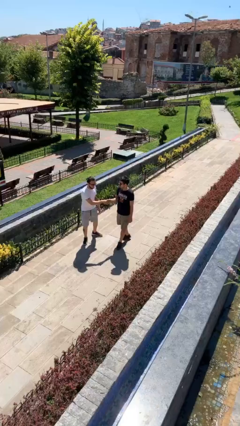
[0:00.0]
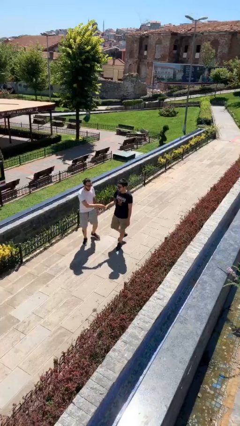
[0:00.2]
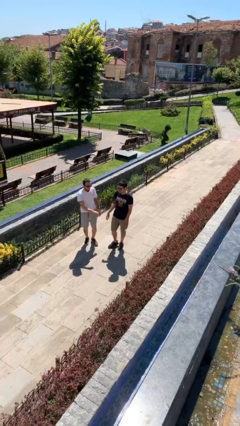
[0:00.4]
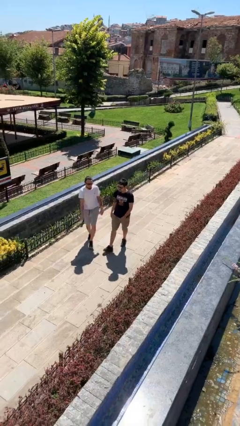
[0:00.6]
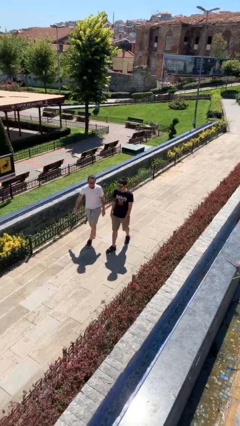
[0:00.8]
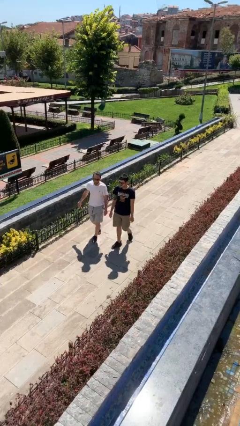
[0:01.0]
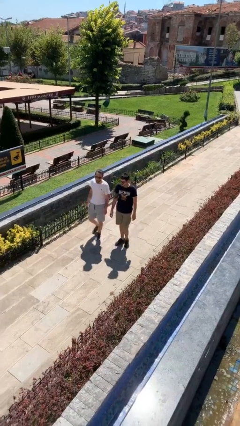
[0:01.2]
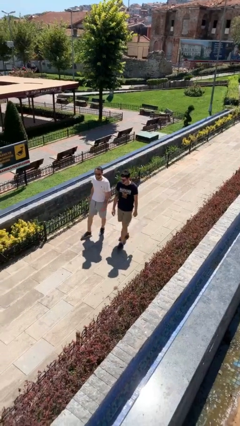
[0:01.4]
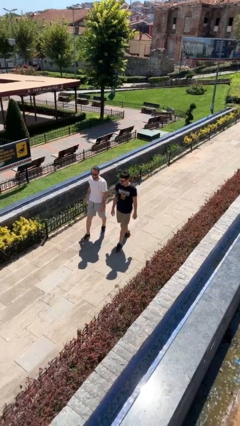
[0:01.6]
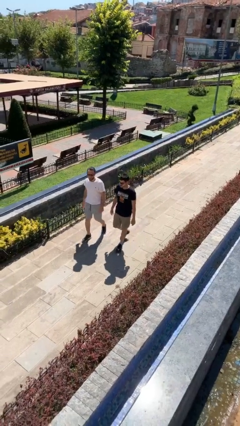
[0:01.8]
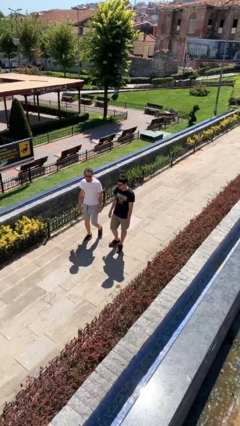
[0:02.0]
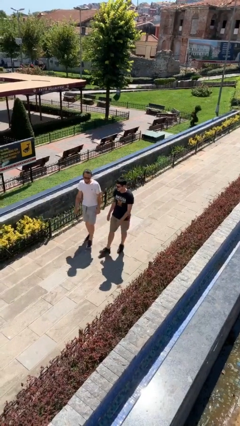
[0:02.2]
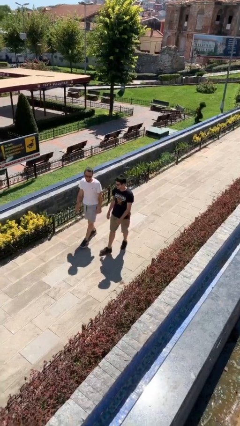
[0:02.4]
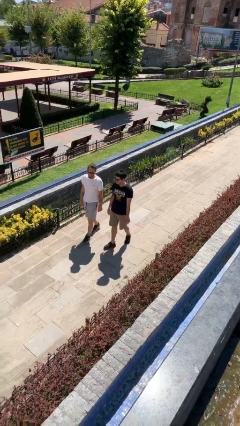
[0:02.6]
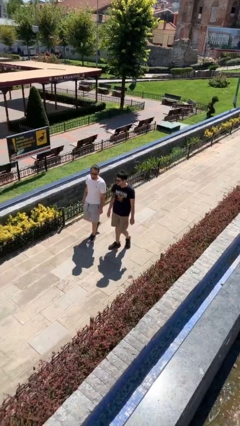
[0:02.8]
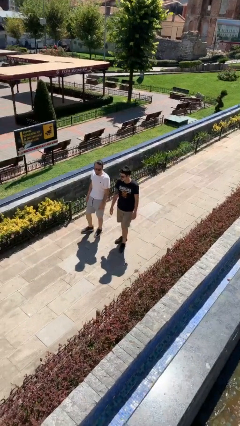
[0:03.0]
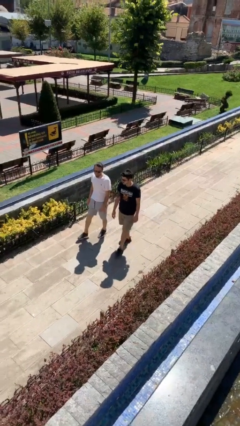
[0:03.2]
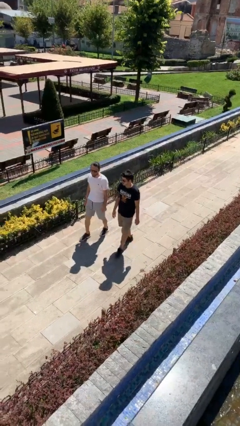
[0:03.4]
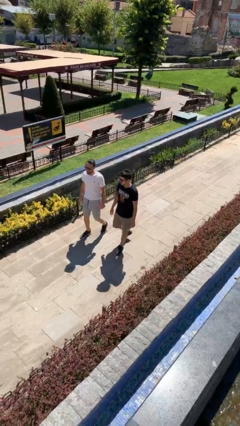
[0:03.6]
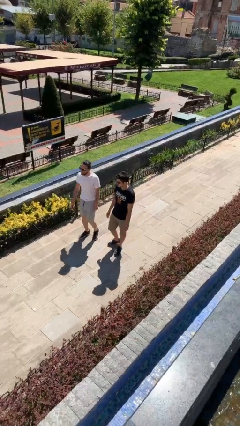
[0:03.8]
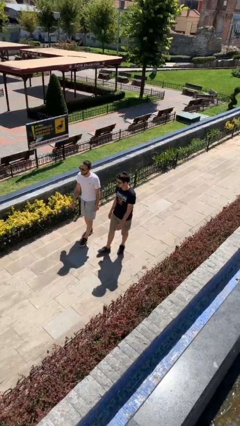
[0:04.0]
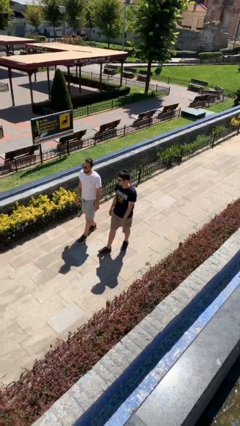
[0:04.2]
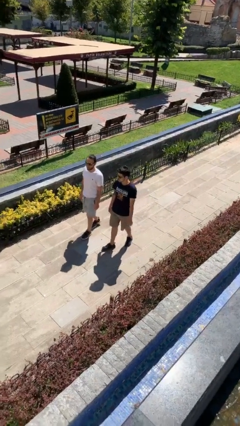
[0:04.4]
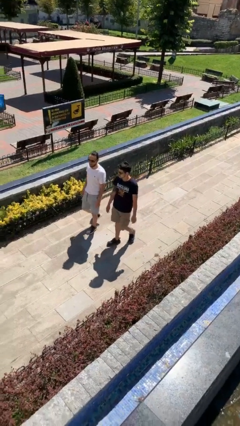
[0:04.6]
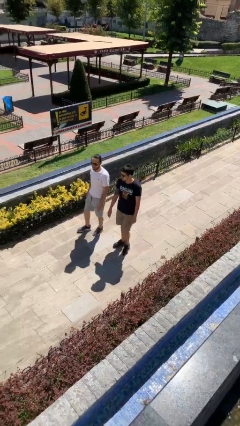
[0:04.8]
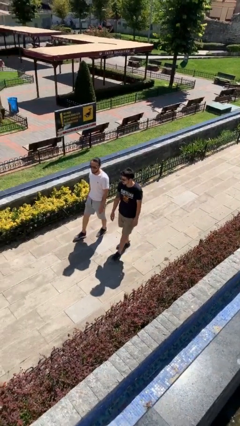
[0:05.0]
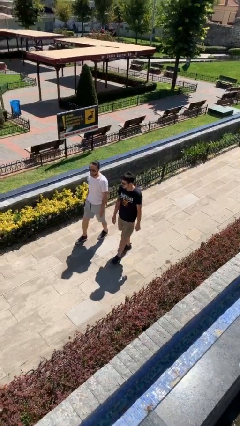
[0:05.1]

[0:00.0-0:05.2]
person talks to person

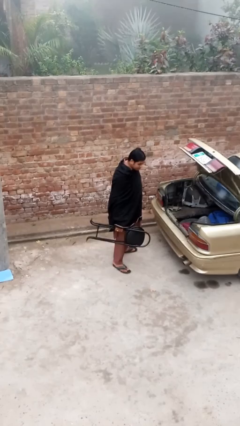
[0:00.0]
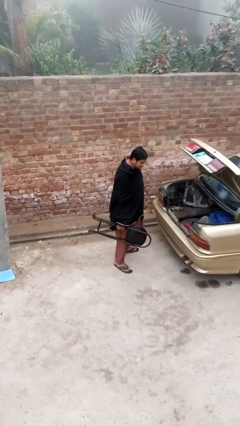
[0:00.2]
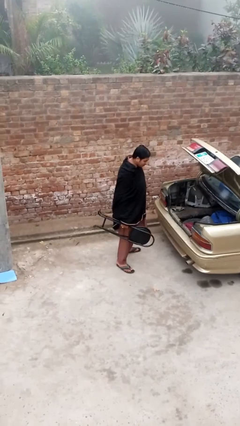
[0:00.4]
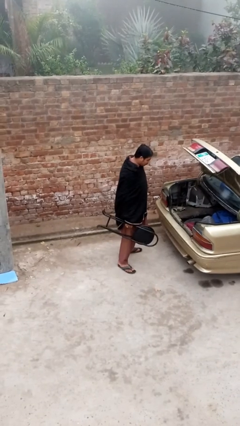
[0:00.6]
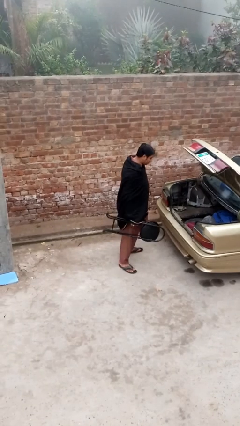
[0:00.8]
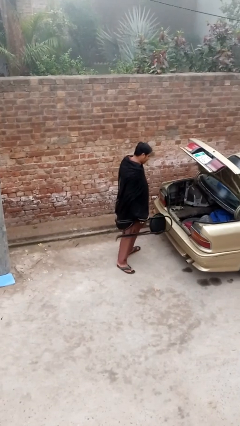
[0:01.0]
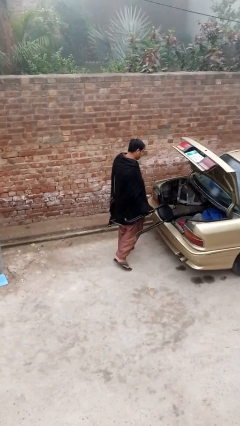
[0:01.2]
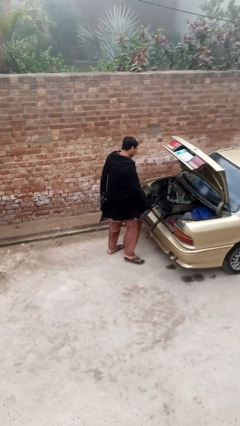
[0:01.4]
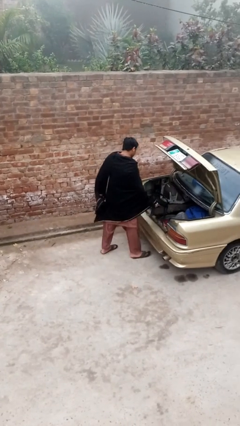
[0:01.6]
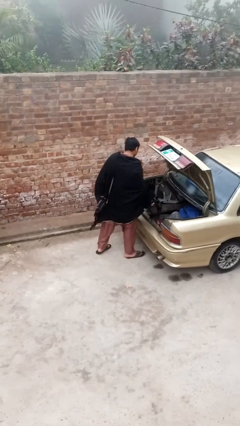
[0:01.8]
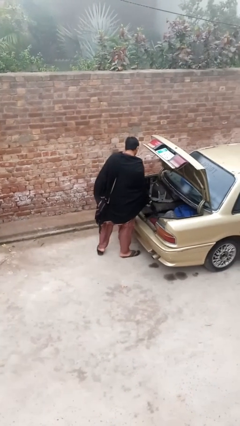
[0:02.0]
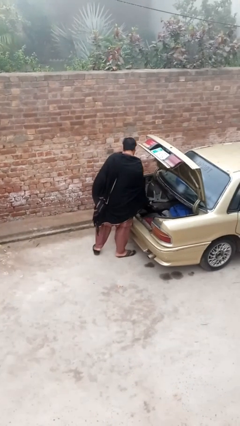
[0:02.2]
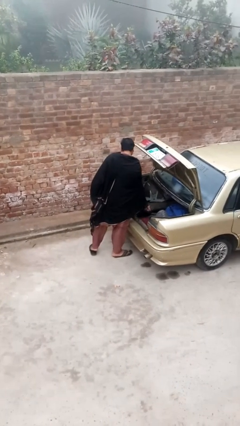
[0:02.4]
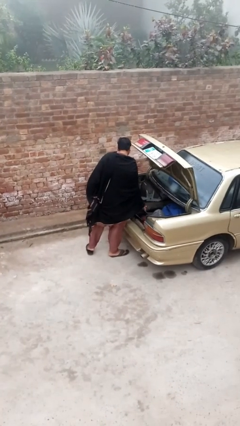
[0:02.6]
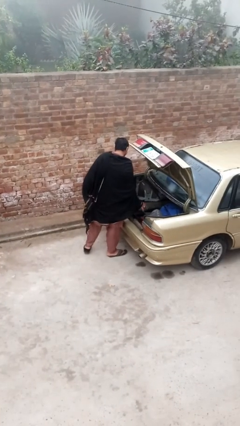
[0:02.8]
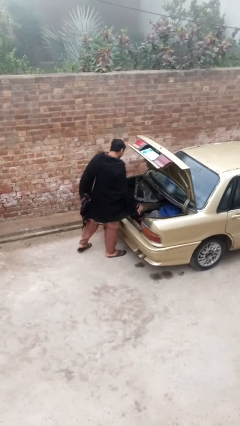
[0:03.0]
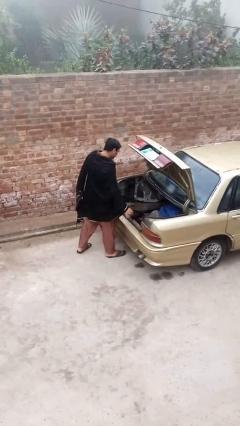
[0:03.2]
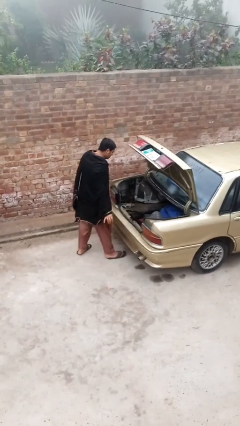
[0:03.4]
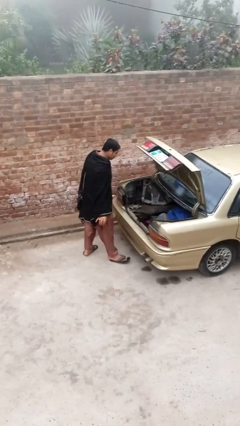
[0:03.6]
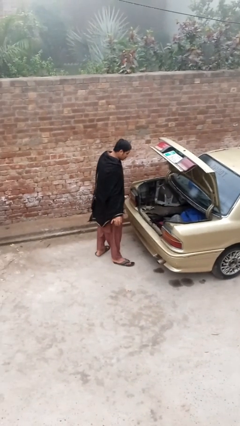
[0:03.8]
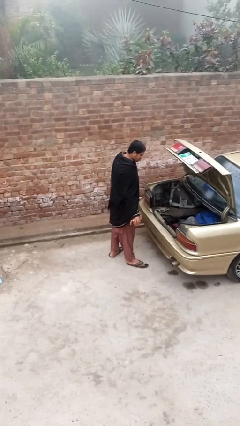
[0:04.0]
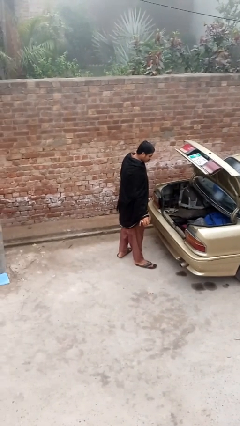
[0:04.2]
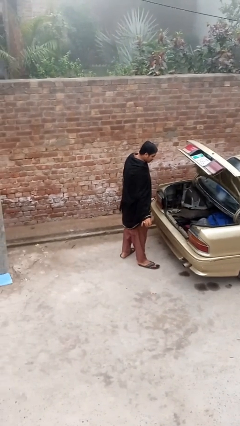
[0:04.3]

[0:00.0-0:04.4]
person loads car

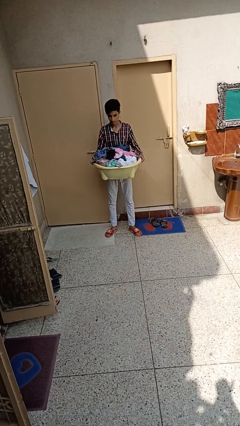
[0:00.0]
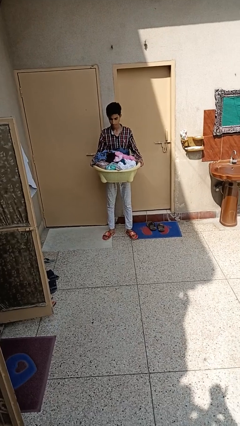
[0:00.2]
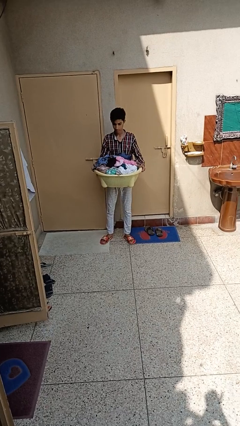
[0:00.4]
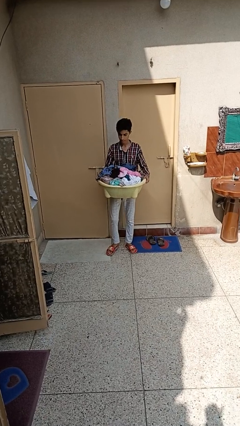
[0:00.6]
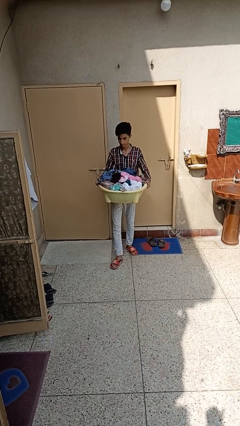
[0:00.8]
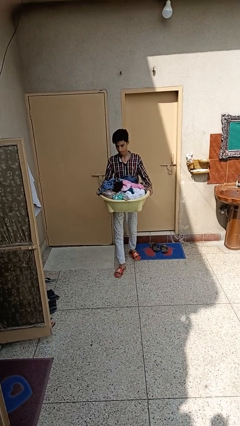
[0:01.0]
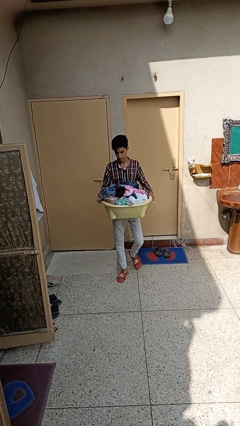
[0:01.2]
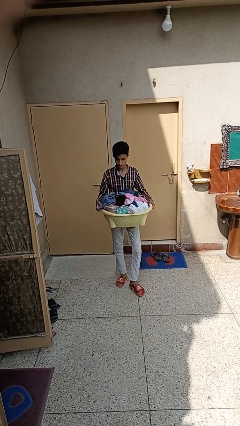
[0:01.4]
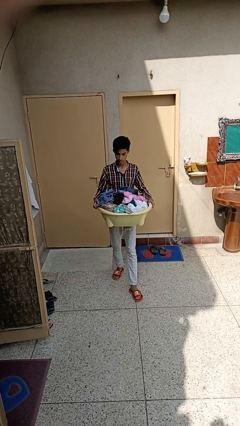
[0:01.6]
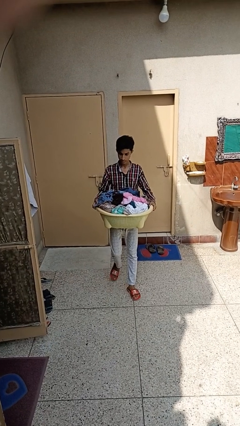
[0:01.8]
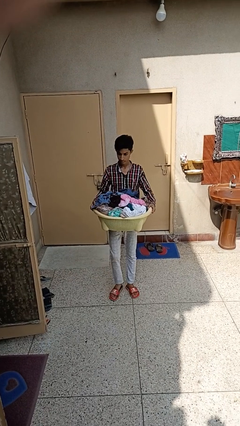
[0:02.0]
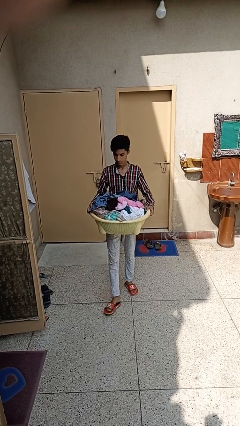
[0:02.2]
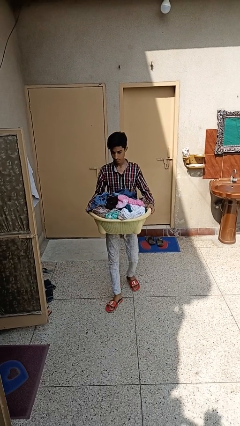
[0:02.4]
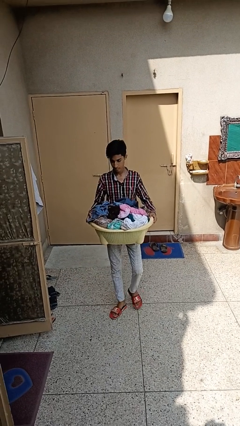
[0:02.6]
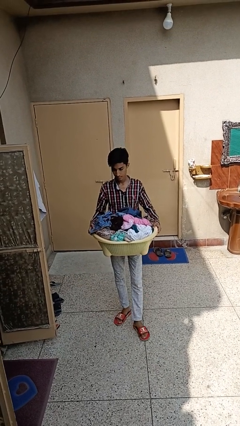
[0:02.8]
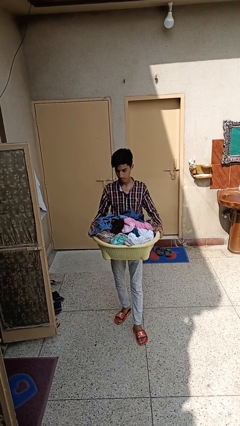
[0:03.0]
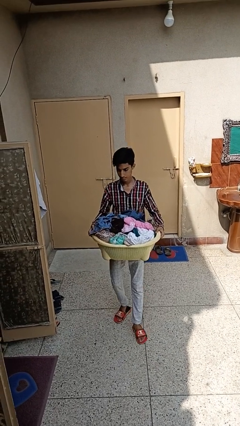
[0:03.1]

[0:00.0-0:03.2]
person carries laundry basket

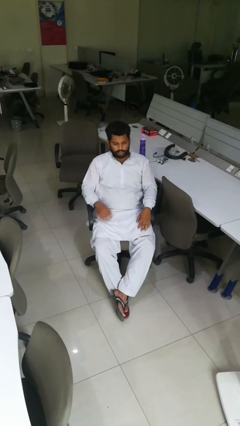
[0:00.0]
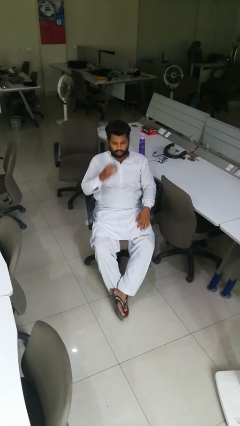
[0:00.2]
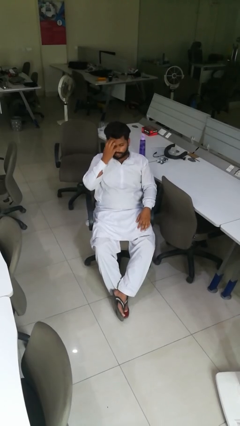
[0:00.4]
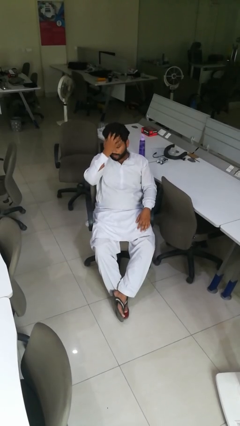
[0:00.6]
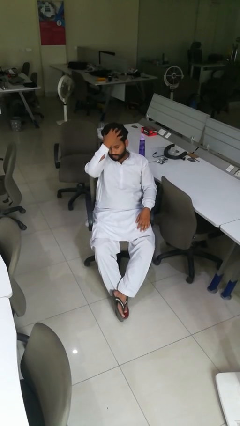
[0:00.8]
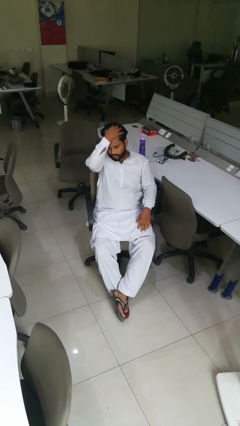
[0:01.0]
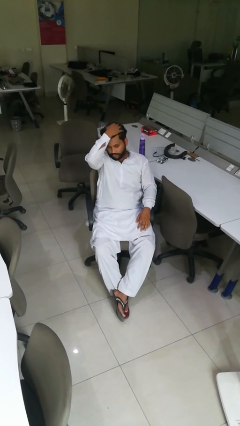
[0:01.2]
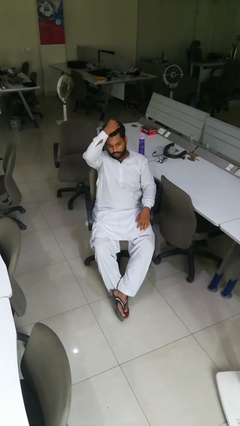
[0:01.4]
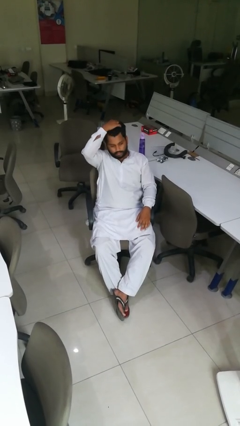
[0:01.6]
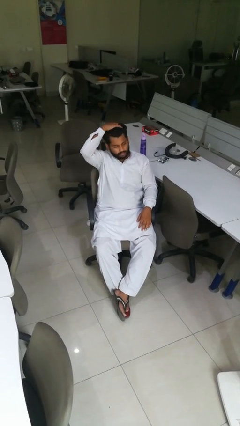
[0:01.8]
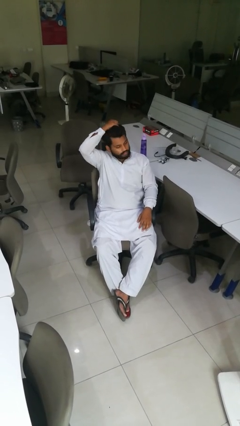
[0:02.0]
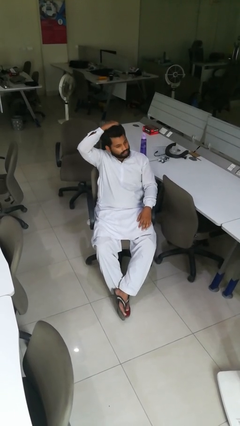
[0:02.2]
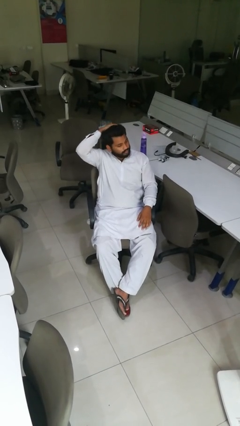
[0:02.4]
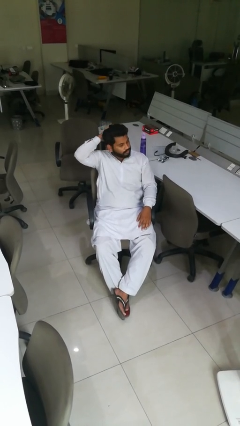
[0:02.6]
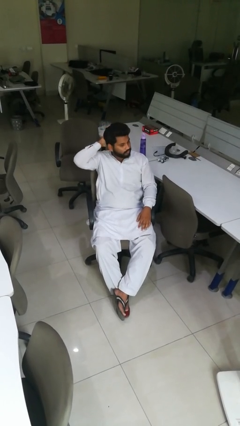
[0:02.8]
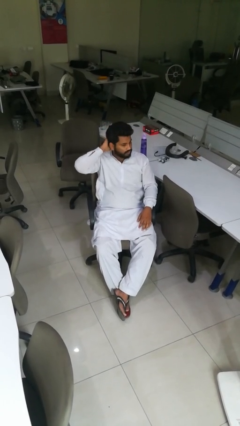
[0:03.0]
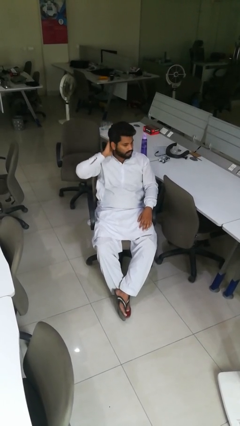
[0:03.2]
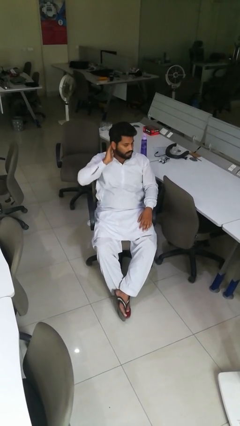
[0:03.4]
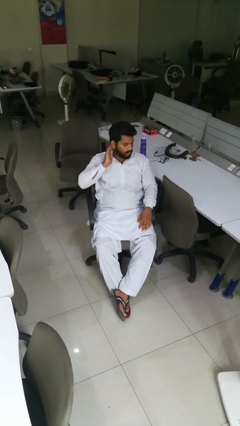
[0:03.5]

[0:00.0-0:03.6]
person strokes hair

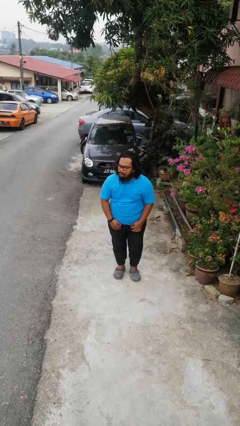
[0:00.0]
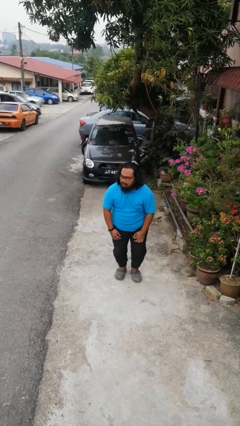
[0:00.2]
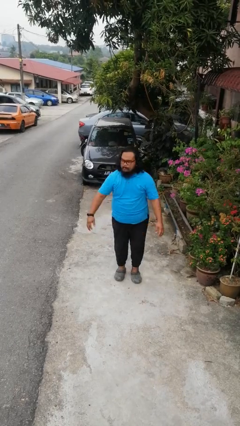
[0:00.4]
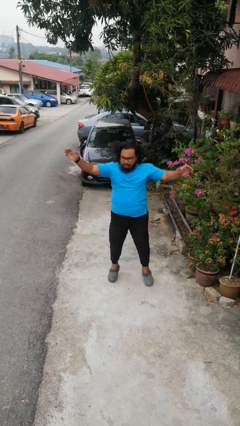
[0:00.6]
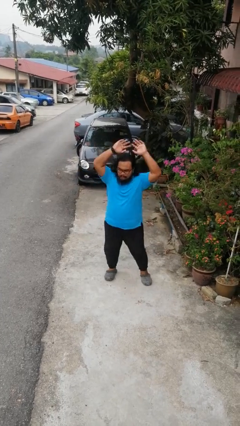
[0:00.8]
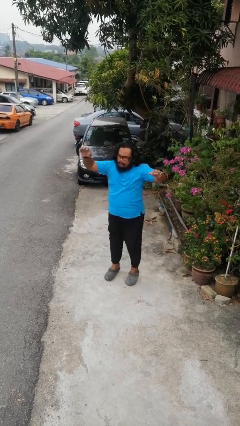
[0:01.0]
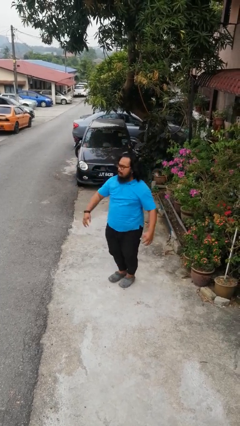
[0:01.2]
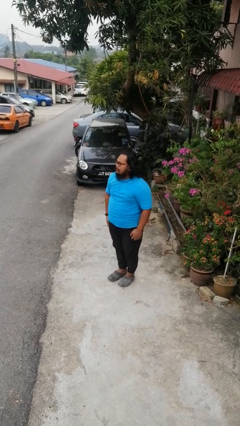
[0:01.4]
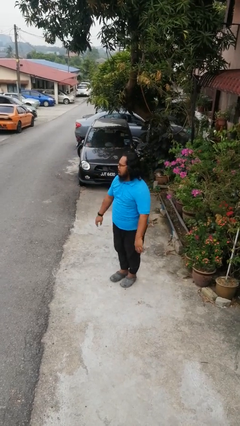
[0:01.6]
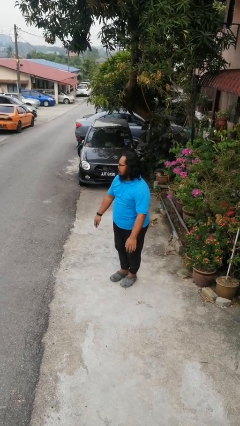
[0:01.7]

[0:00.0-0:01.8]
person exercises with jumping jacks
